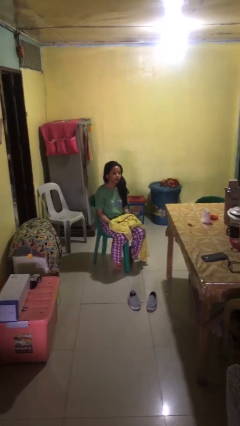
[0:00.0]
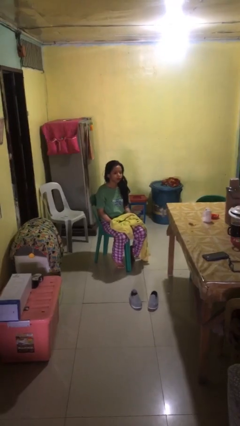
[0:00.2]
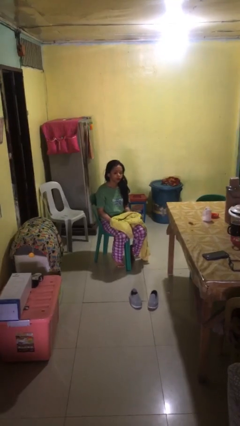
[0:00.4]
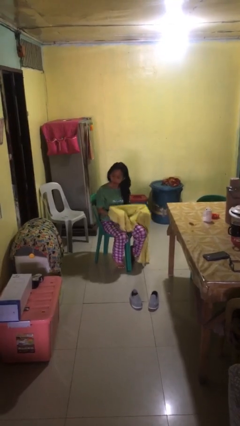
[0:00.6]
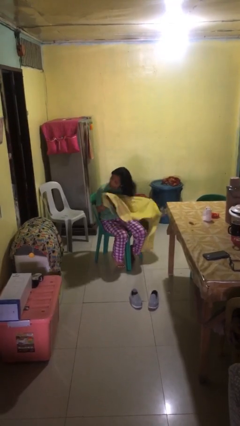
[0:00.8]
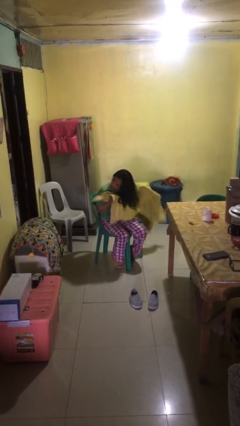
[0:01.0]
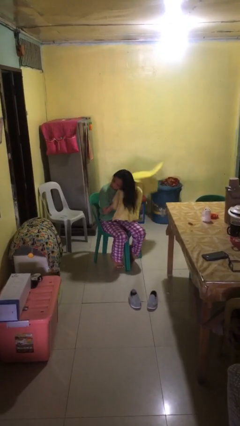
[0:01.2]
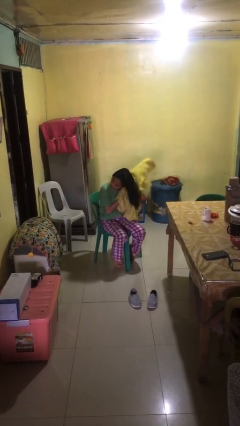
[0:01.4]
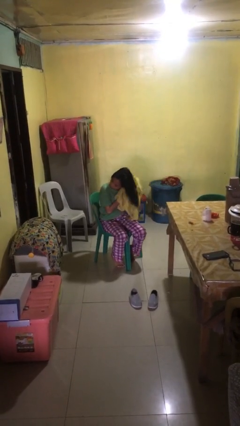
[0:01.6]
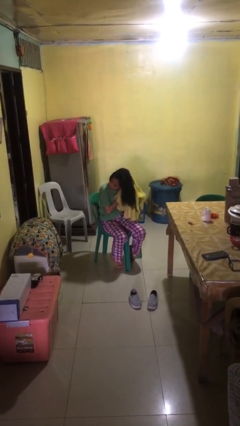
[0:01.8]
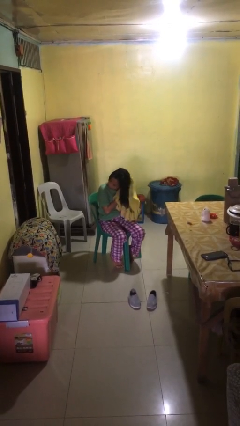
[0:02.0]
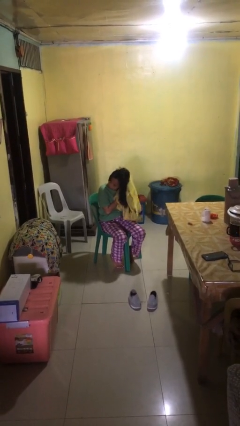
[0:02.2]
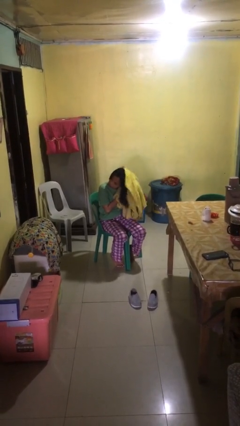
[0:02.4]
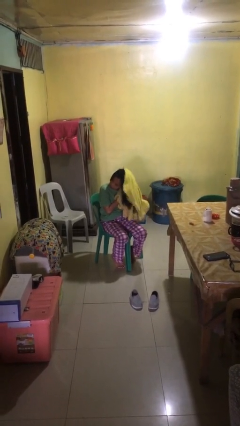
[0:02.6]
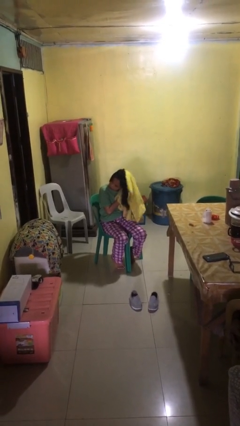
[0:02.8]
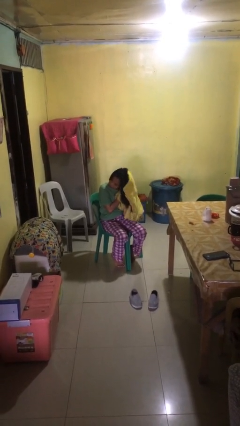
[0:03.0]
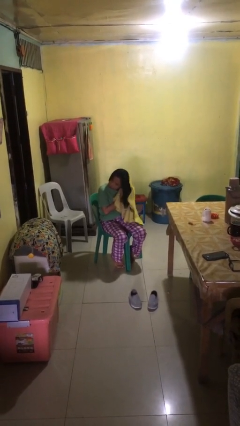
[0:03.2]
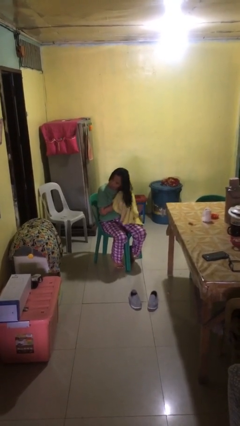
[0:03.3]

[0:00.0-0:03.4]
person dries hair with towel

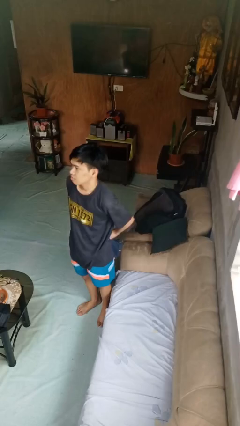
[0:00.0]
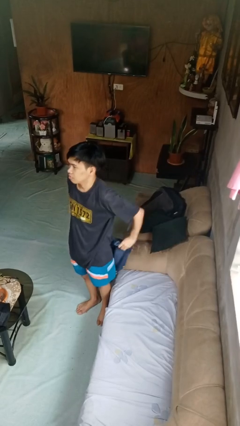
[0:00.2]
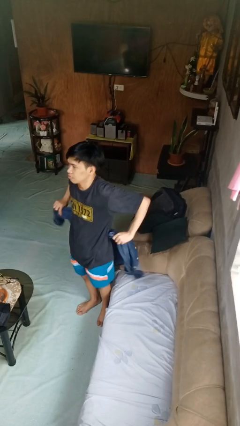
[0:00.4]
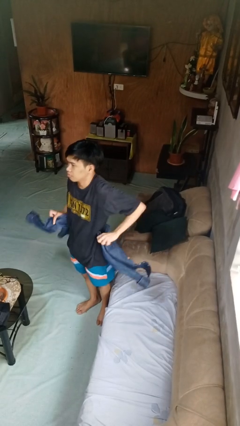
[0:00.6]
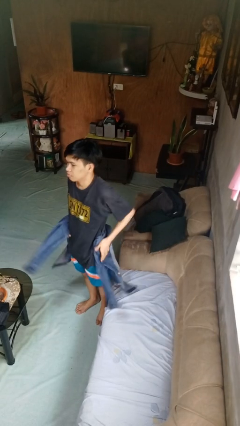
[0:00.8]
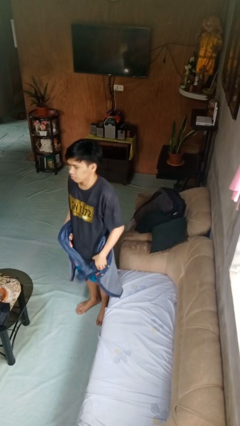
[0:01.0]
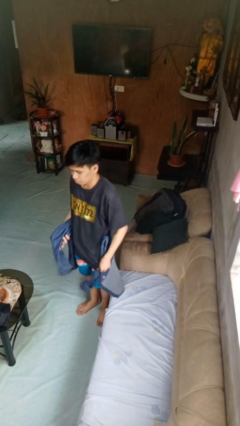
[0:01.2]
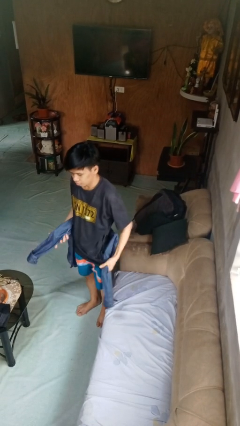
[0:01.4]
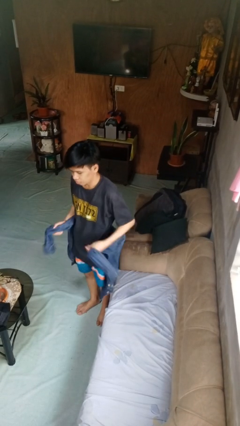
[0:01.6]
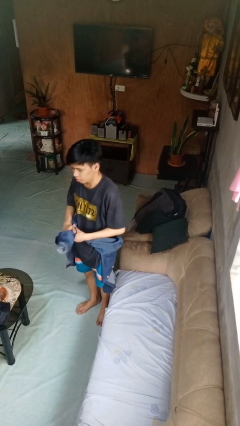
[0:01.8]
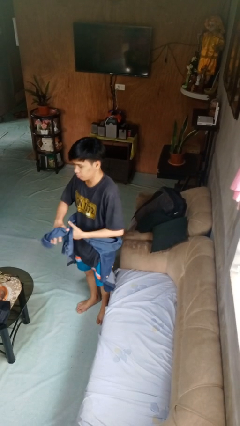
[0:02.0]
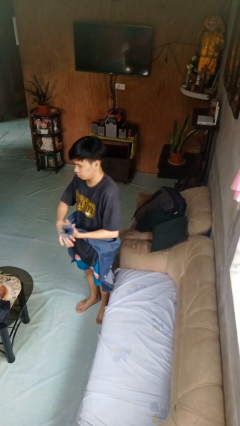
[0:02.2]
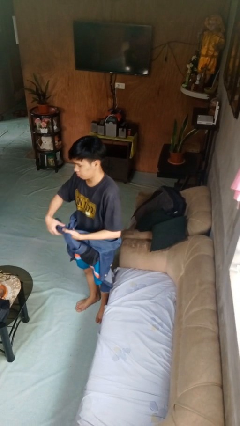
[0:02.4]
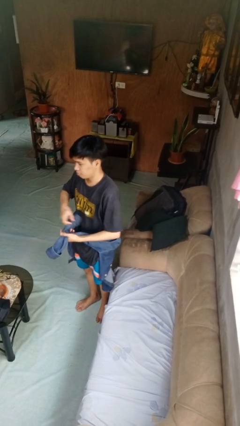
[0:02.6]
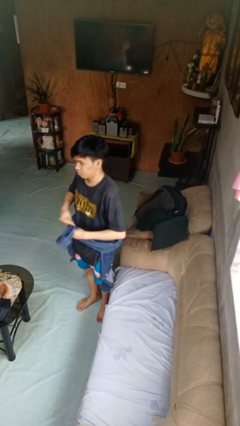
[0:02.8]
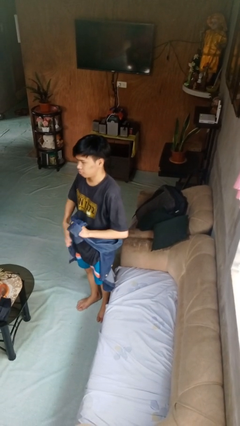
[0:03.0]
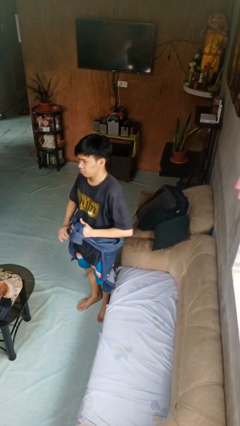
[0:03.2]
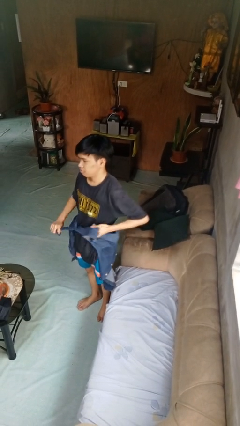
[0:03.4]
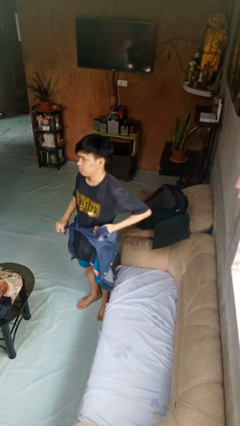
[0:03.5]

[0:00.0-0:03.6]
person ties jacket around waist

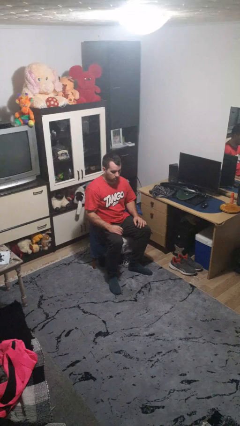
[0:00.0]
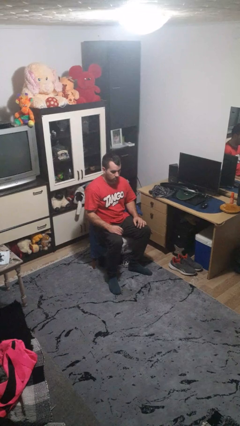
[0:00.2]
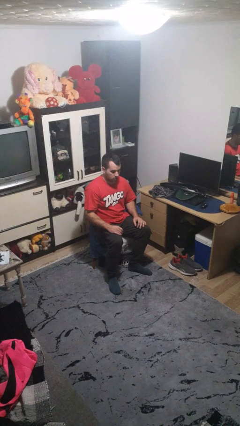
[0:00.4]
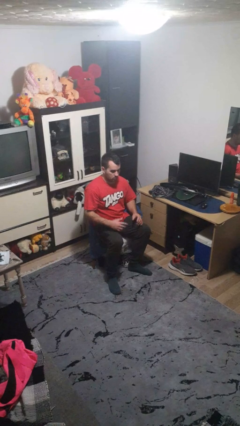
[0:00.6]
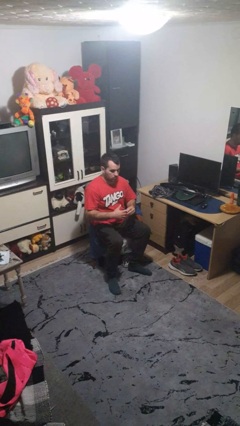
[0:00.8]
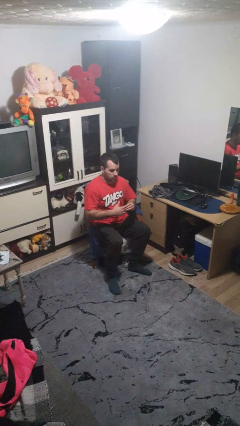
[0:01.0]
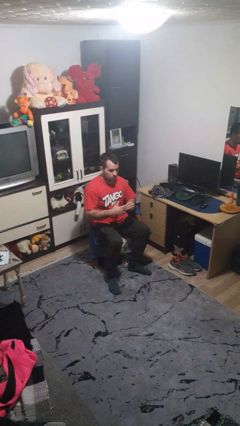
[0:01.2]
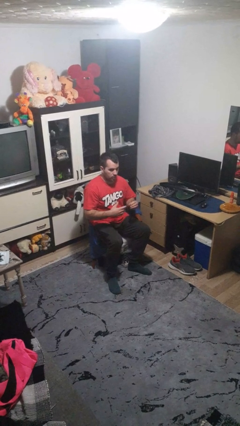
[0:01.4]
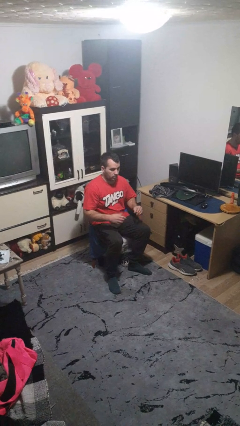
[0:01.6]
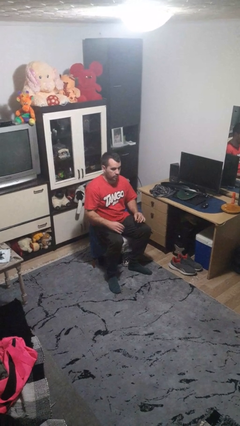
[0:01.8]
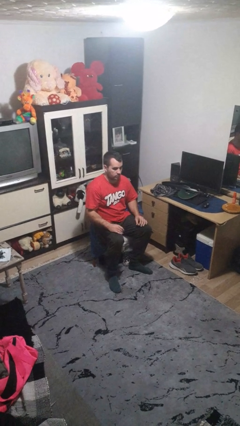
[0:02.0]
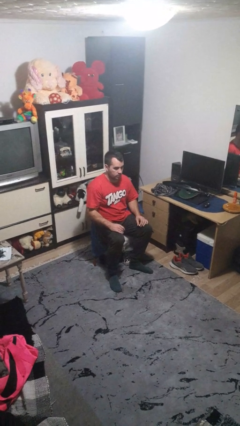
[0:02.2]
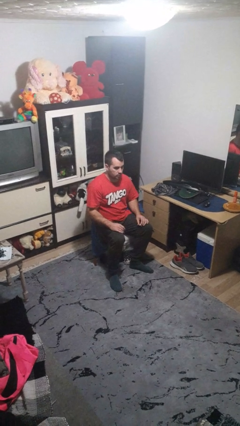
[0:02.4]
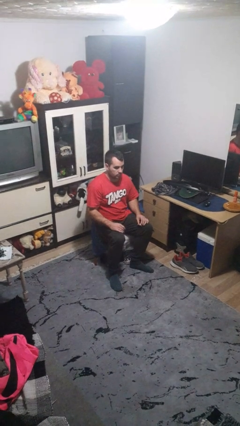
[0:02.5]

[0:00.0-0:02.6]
person takes off ring

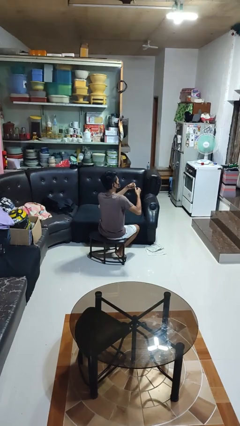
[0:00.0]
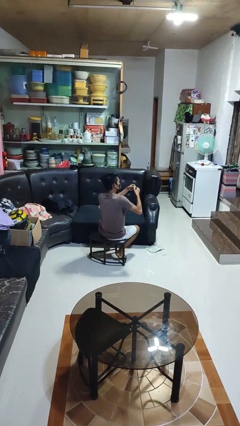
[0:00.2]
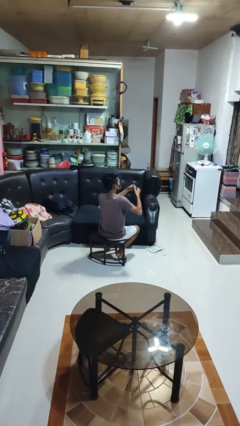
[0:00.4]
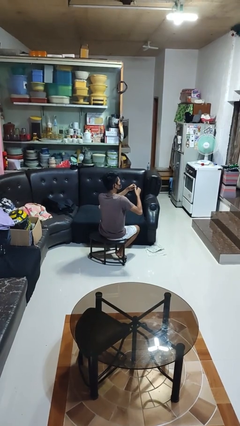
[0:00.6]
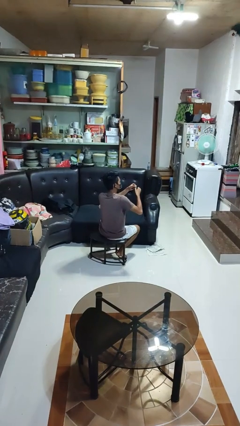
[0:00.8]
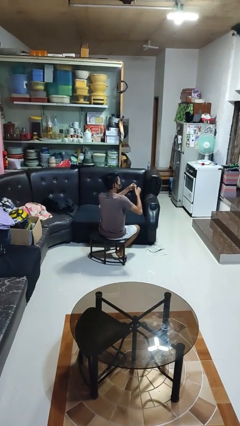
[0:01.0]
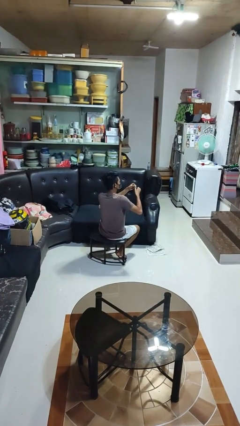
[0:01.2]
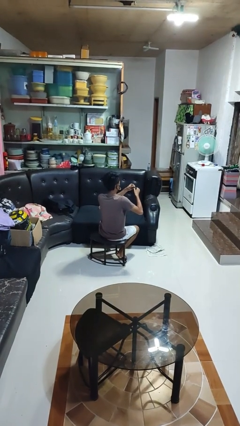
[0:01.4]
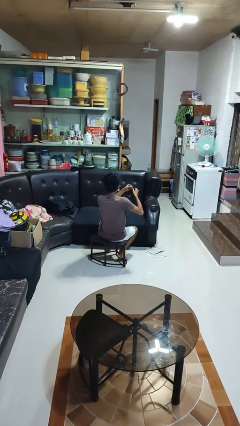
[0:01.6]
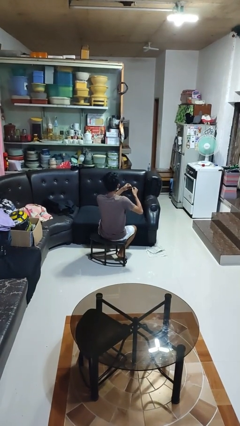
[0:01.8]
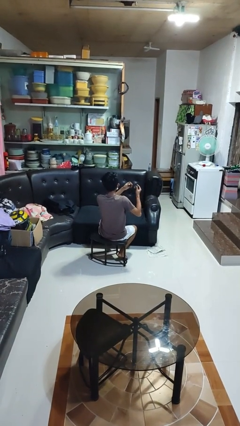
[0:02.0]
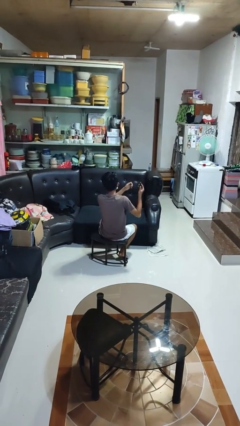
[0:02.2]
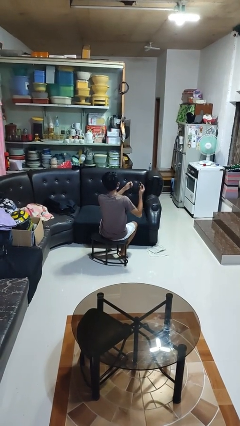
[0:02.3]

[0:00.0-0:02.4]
person clips fingernails

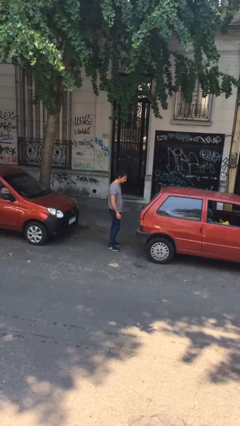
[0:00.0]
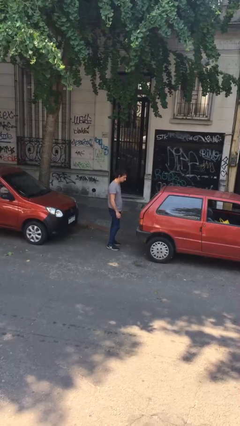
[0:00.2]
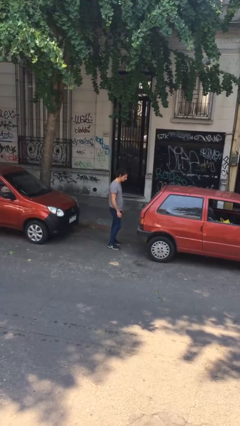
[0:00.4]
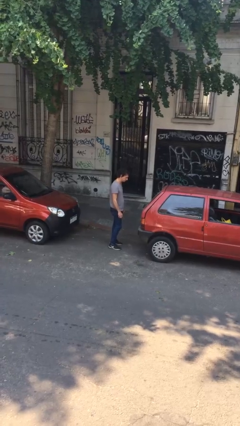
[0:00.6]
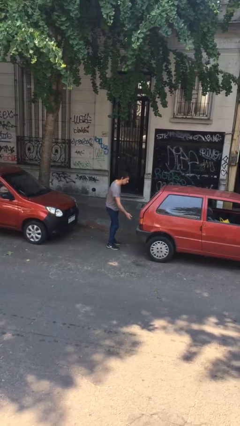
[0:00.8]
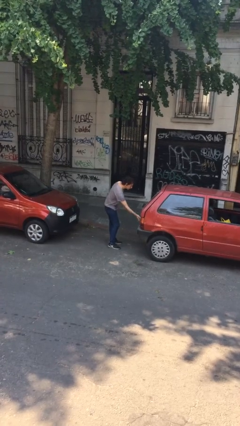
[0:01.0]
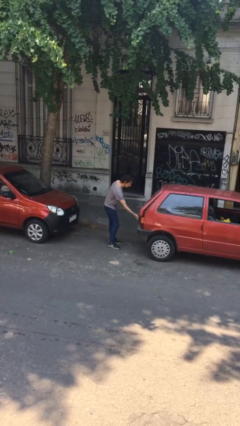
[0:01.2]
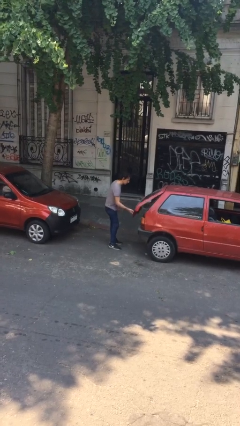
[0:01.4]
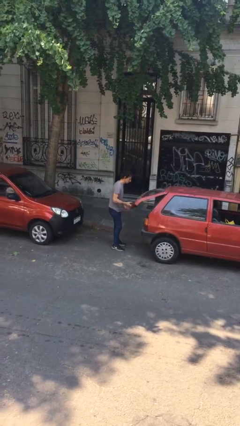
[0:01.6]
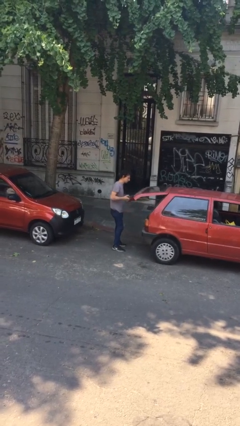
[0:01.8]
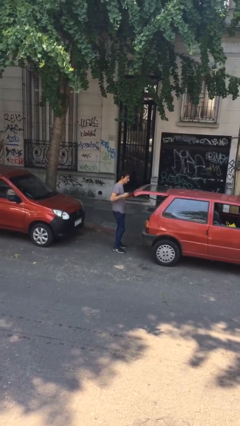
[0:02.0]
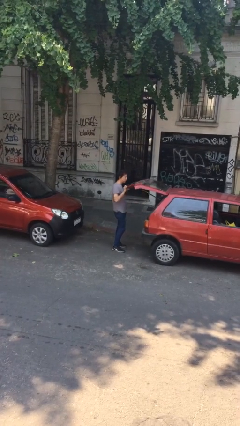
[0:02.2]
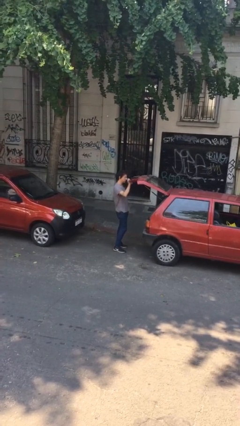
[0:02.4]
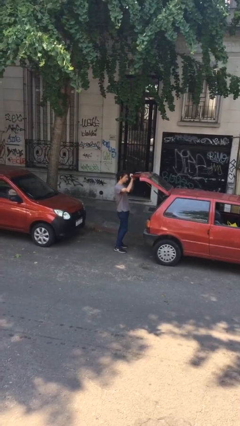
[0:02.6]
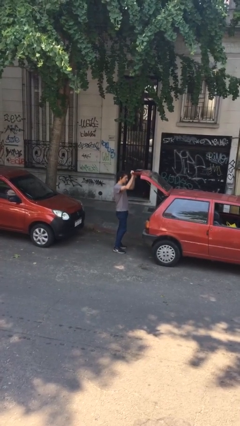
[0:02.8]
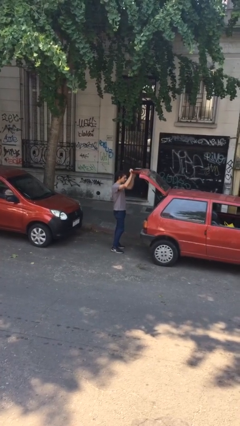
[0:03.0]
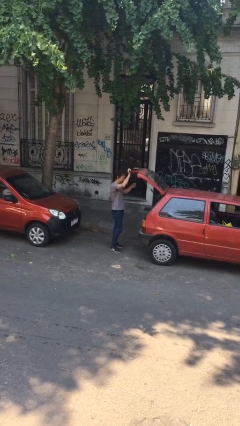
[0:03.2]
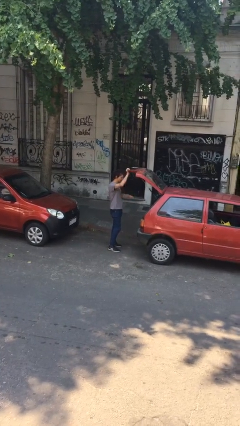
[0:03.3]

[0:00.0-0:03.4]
person opens car trunk

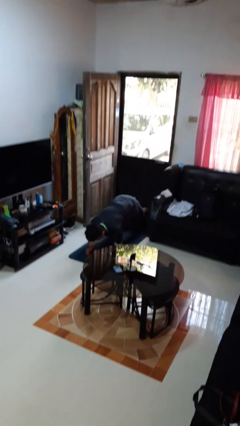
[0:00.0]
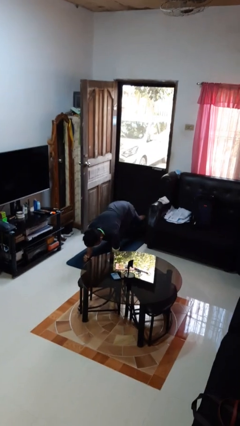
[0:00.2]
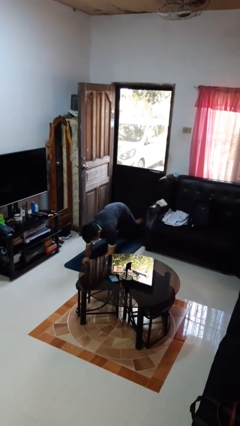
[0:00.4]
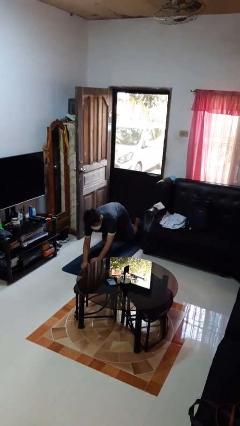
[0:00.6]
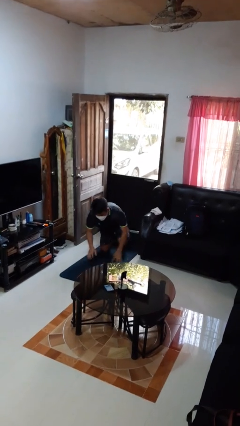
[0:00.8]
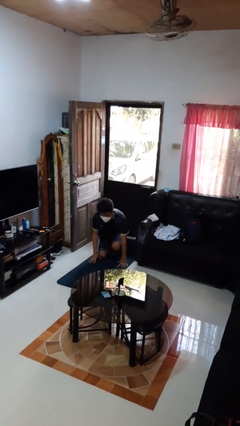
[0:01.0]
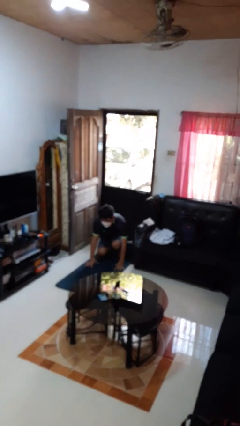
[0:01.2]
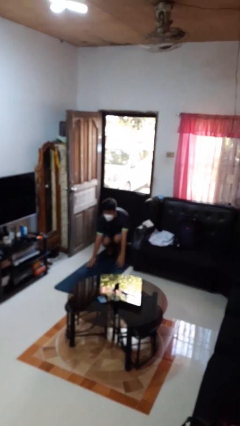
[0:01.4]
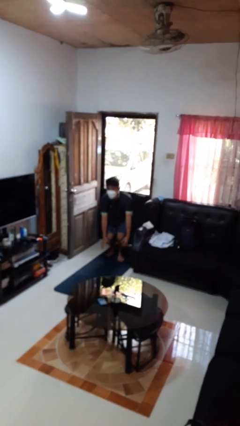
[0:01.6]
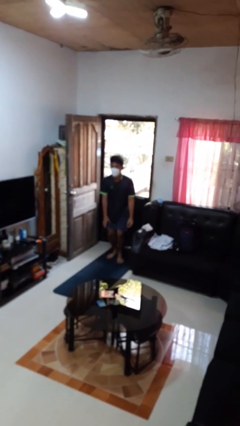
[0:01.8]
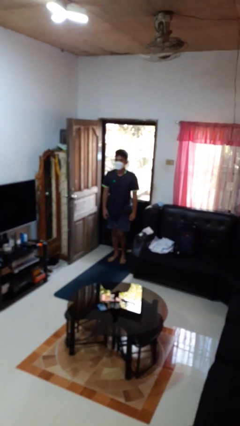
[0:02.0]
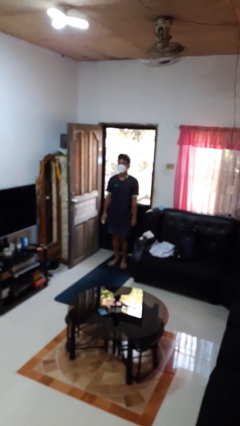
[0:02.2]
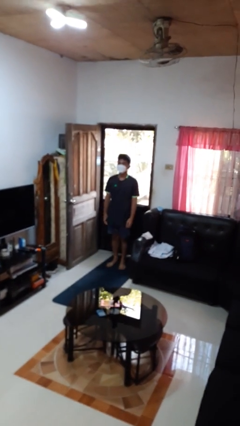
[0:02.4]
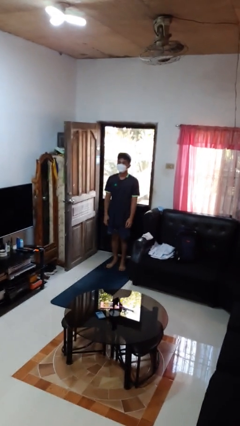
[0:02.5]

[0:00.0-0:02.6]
person stands up from floor
